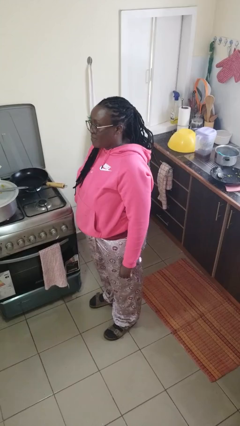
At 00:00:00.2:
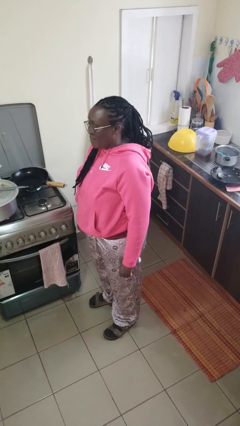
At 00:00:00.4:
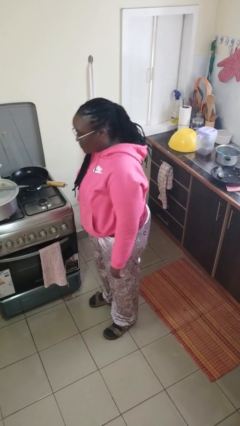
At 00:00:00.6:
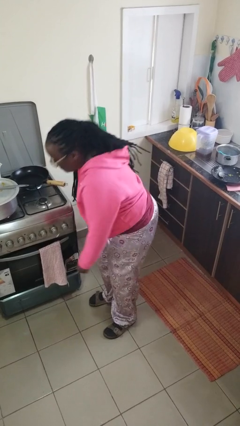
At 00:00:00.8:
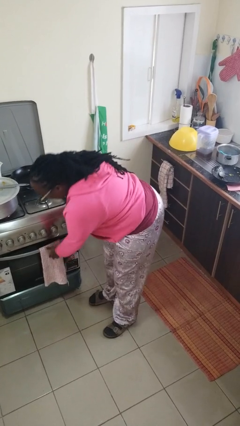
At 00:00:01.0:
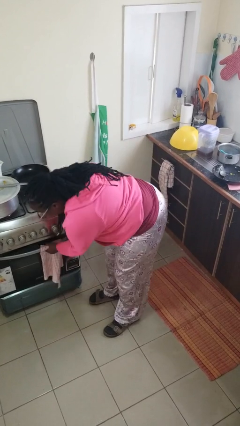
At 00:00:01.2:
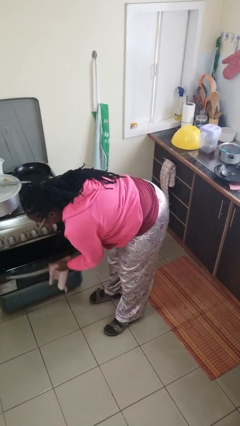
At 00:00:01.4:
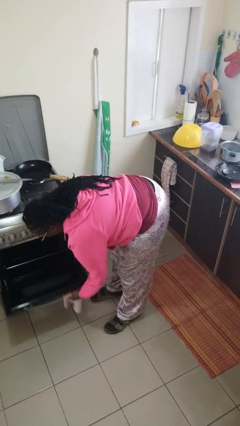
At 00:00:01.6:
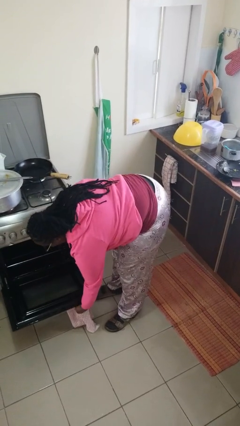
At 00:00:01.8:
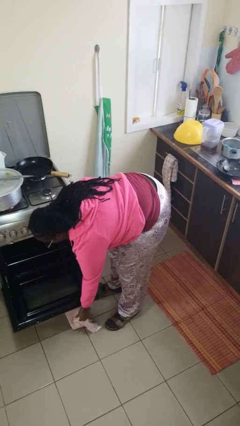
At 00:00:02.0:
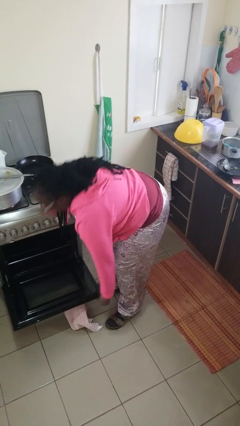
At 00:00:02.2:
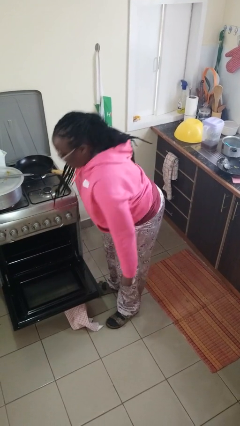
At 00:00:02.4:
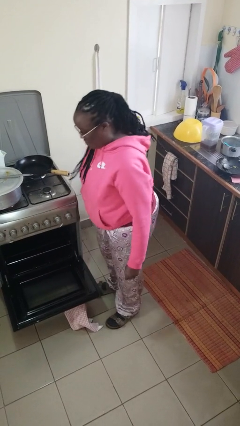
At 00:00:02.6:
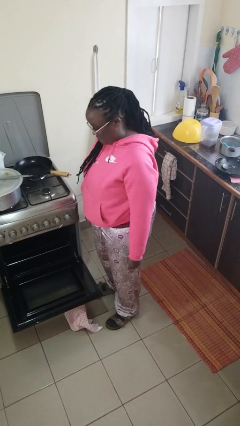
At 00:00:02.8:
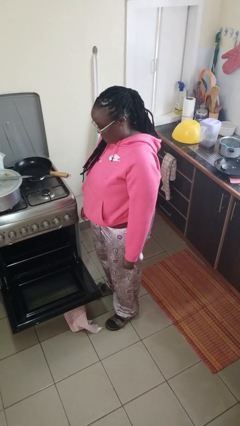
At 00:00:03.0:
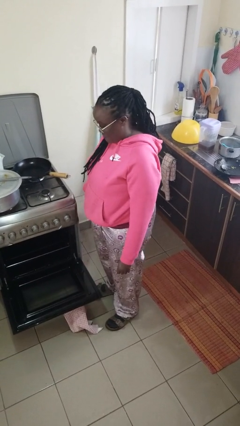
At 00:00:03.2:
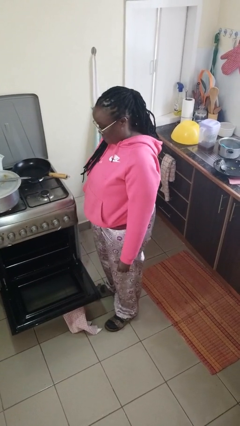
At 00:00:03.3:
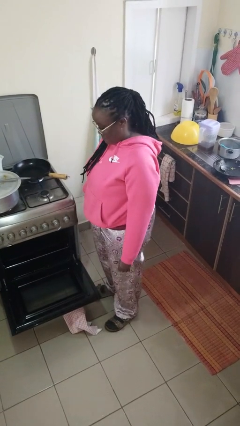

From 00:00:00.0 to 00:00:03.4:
person opens oven door

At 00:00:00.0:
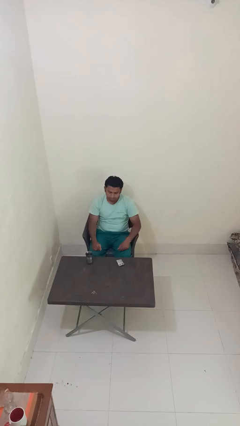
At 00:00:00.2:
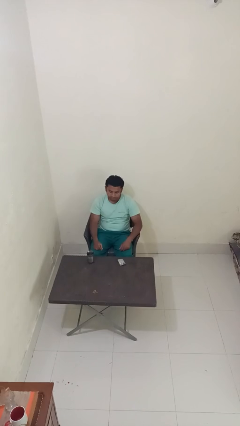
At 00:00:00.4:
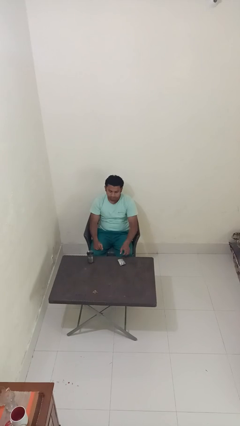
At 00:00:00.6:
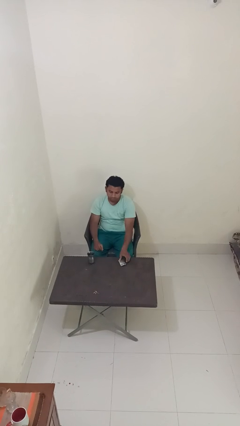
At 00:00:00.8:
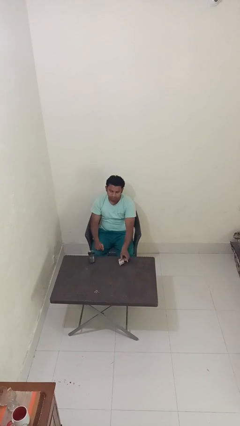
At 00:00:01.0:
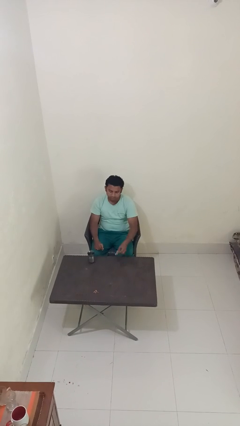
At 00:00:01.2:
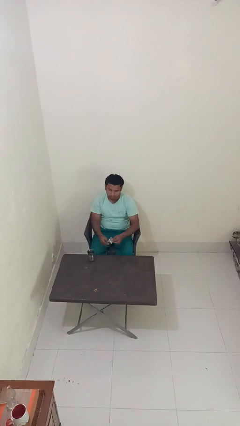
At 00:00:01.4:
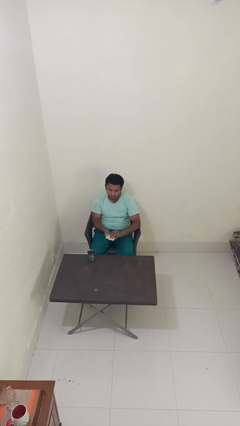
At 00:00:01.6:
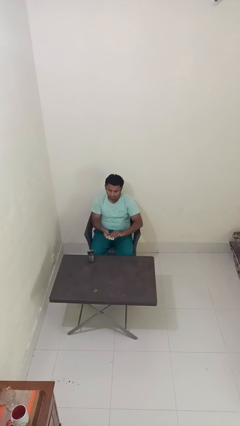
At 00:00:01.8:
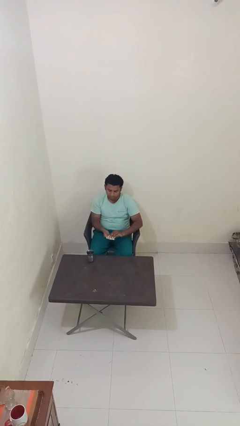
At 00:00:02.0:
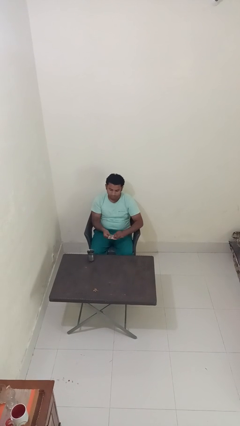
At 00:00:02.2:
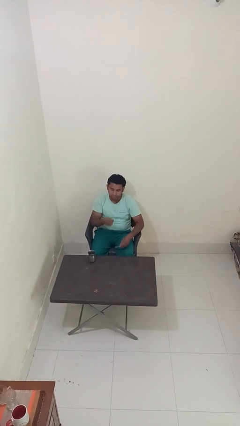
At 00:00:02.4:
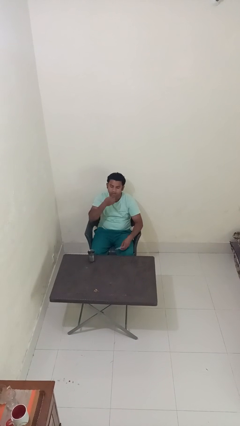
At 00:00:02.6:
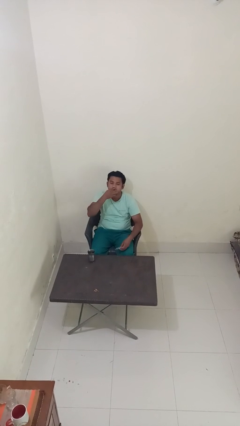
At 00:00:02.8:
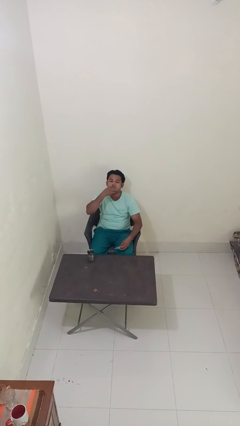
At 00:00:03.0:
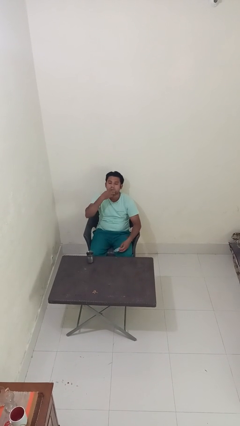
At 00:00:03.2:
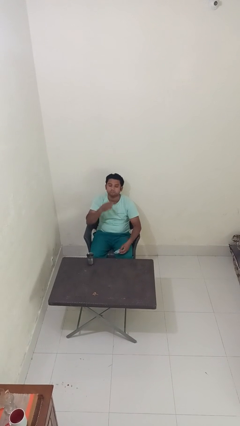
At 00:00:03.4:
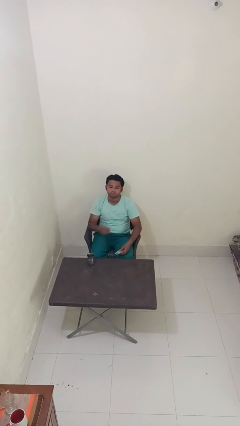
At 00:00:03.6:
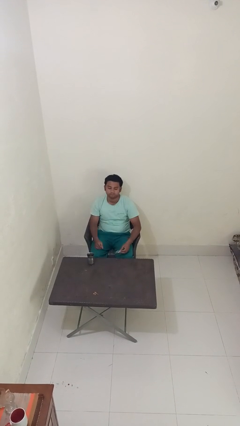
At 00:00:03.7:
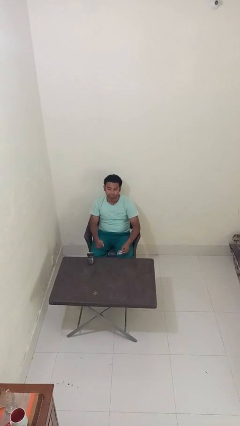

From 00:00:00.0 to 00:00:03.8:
person takes medicine pills

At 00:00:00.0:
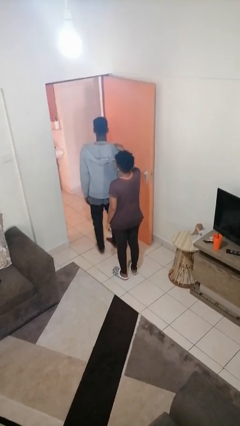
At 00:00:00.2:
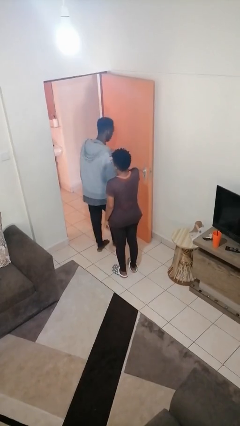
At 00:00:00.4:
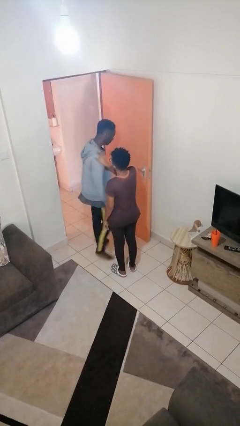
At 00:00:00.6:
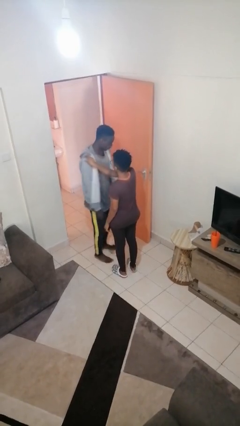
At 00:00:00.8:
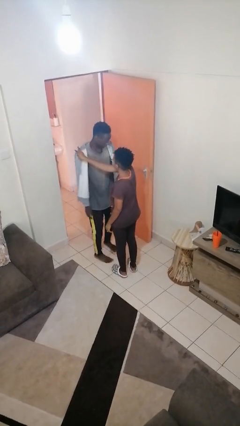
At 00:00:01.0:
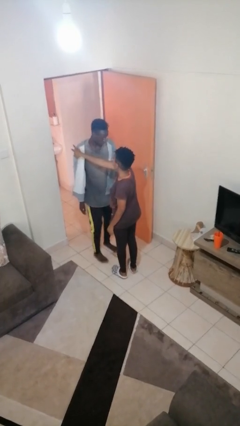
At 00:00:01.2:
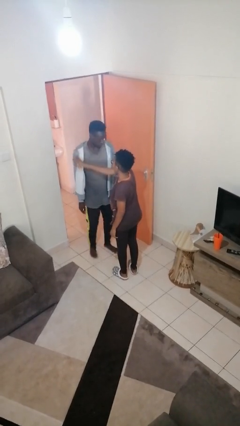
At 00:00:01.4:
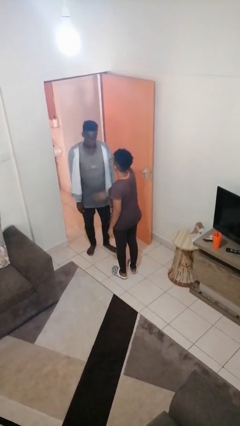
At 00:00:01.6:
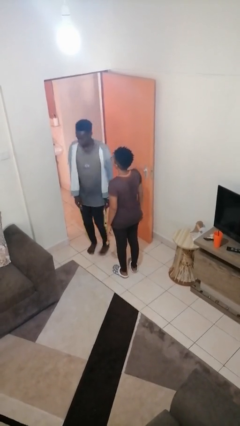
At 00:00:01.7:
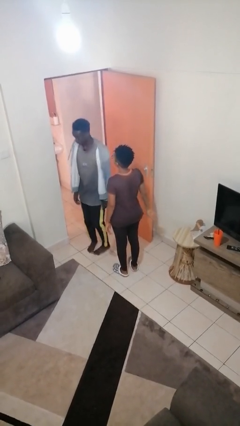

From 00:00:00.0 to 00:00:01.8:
person spins person around

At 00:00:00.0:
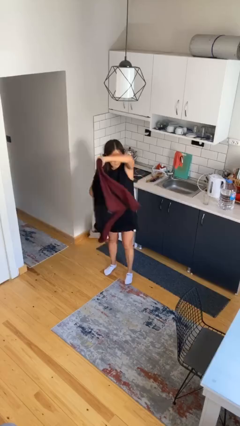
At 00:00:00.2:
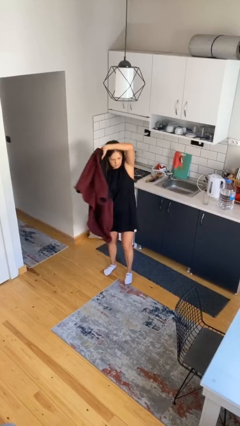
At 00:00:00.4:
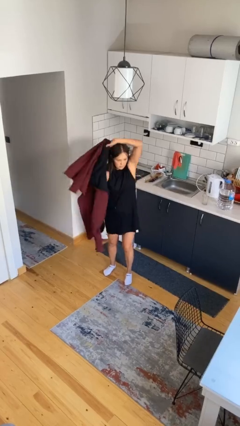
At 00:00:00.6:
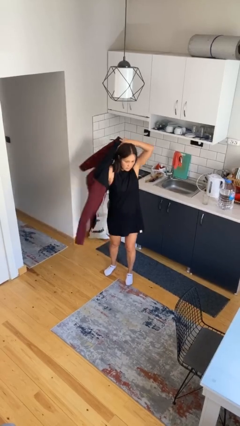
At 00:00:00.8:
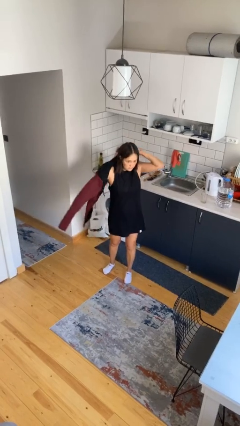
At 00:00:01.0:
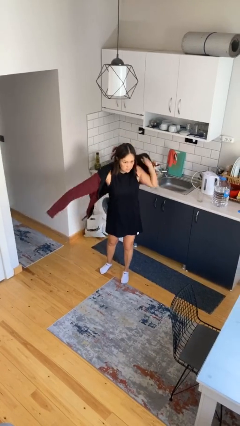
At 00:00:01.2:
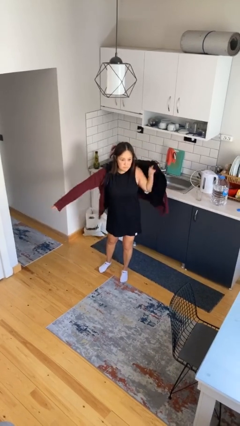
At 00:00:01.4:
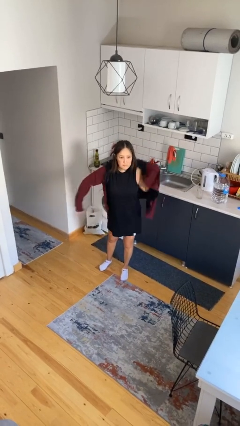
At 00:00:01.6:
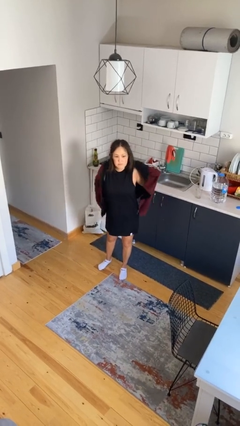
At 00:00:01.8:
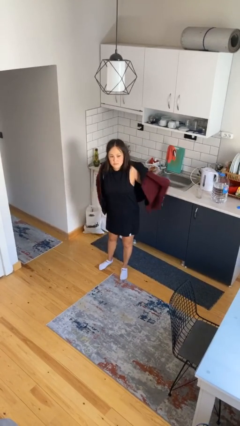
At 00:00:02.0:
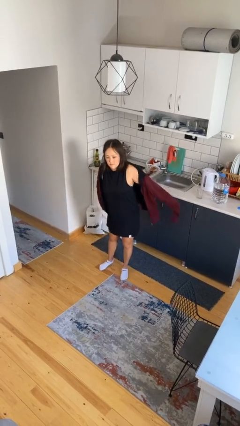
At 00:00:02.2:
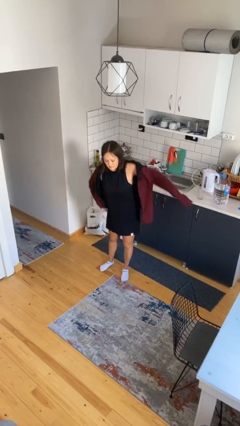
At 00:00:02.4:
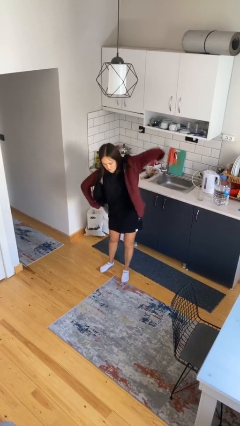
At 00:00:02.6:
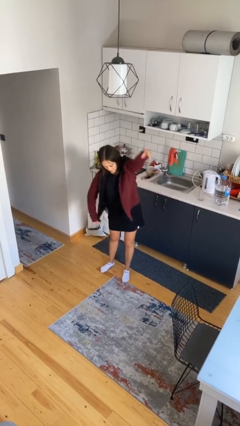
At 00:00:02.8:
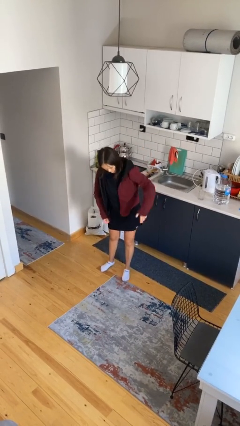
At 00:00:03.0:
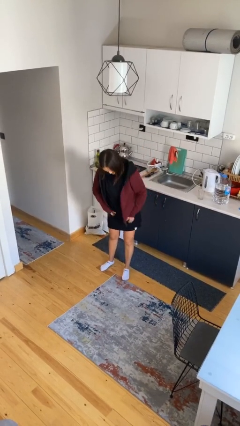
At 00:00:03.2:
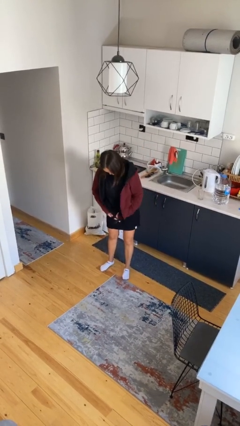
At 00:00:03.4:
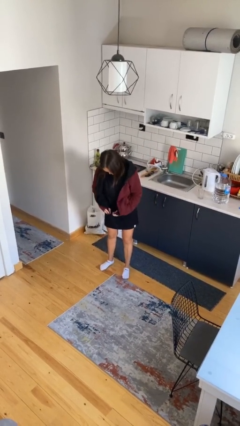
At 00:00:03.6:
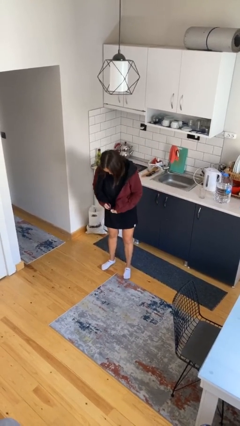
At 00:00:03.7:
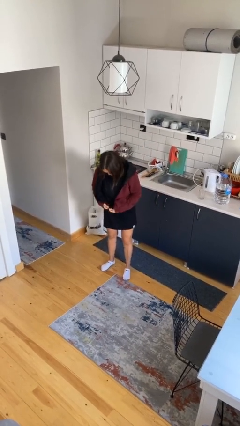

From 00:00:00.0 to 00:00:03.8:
person puts on jacket

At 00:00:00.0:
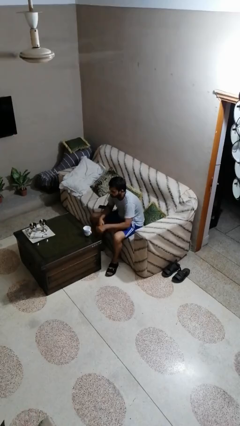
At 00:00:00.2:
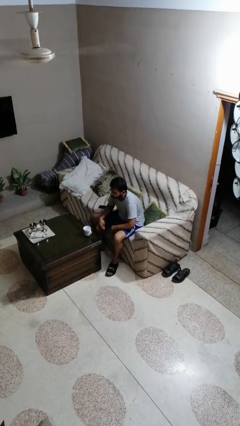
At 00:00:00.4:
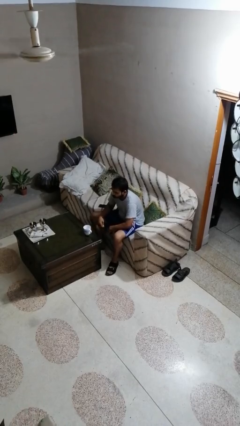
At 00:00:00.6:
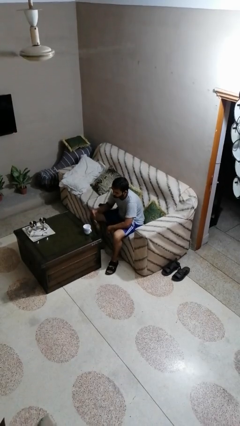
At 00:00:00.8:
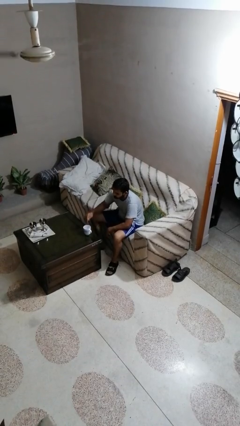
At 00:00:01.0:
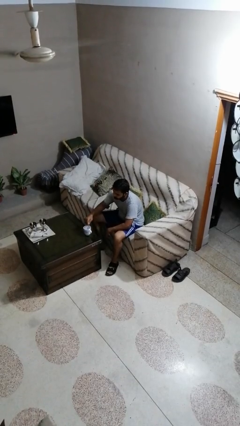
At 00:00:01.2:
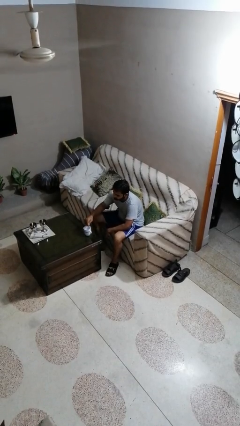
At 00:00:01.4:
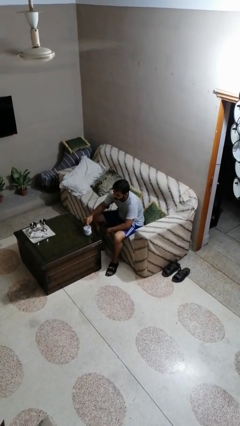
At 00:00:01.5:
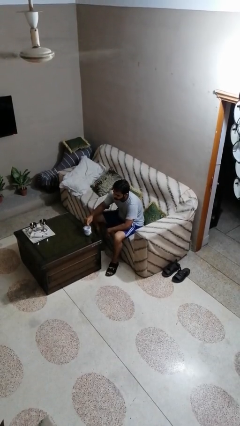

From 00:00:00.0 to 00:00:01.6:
person stirs mug

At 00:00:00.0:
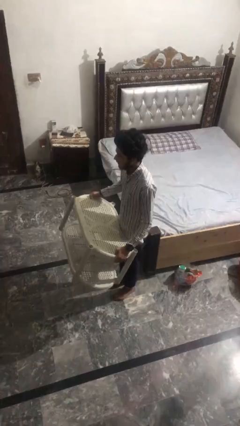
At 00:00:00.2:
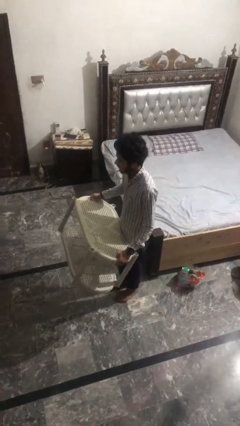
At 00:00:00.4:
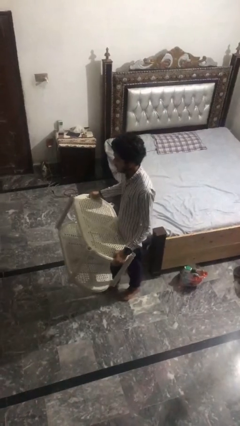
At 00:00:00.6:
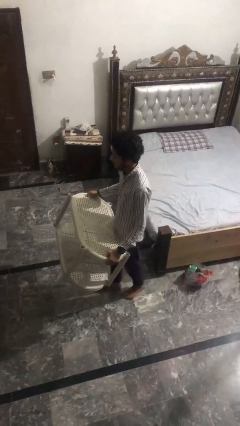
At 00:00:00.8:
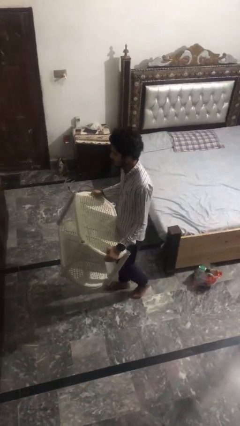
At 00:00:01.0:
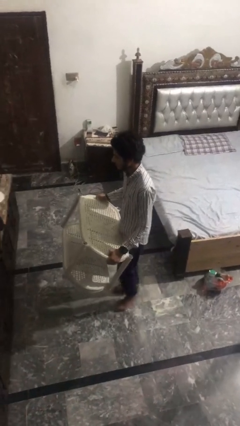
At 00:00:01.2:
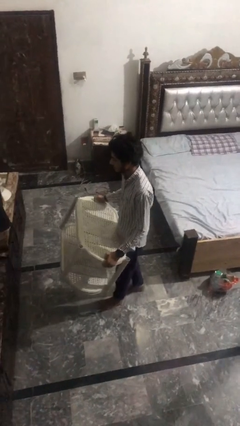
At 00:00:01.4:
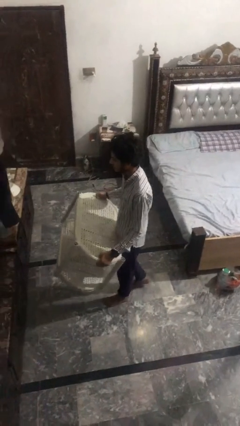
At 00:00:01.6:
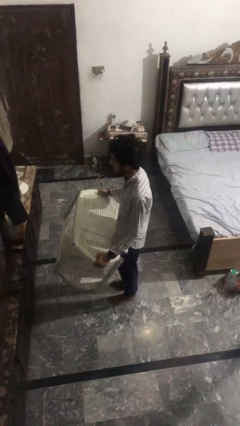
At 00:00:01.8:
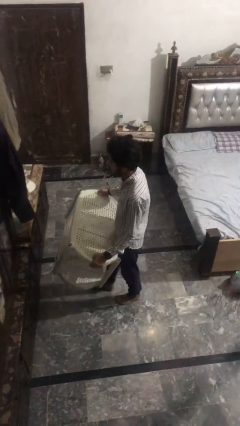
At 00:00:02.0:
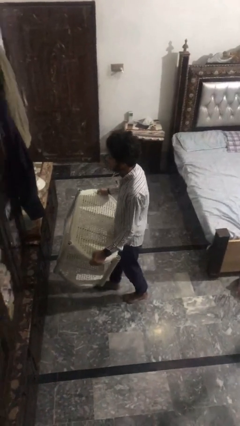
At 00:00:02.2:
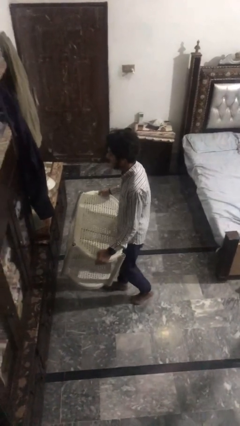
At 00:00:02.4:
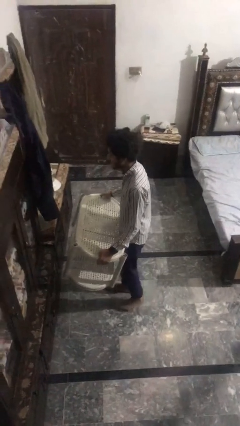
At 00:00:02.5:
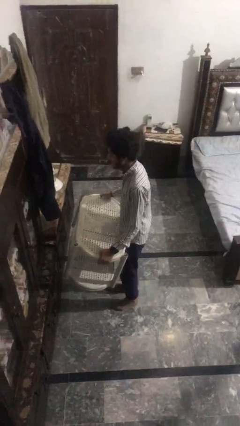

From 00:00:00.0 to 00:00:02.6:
person carries furniture
